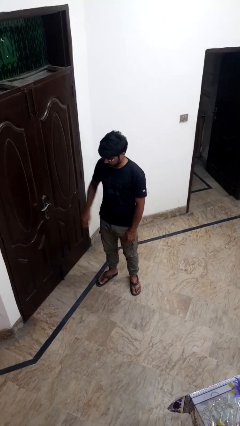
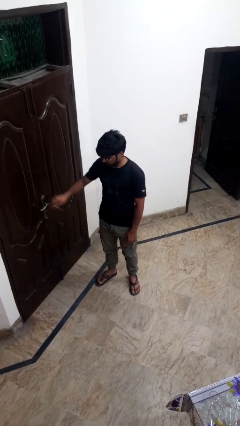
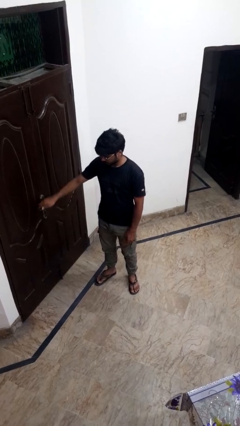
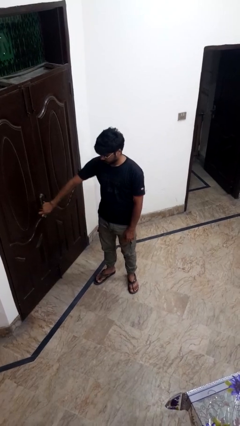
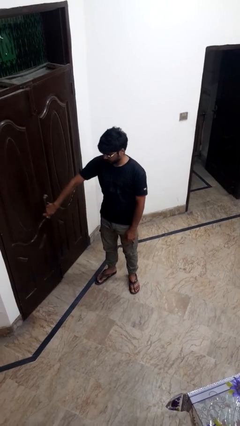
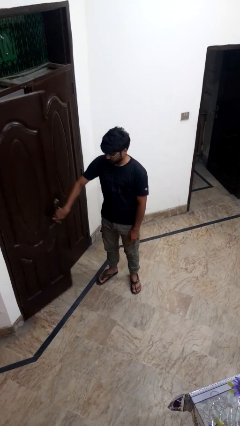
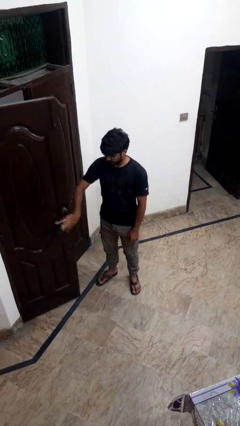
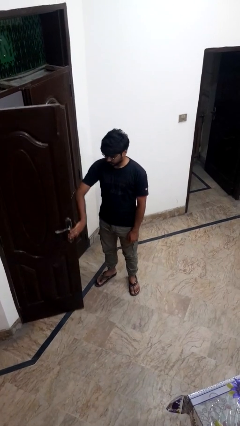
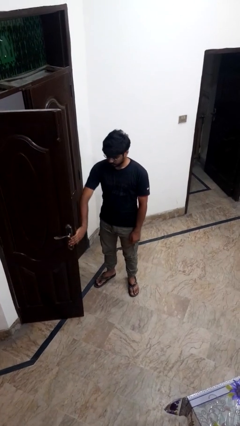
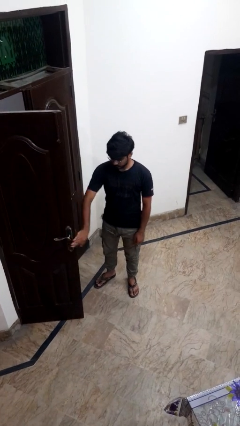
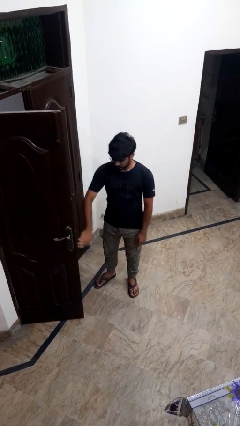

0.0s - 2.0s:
person opens facility door

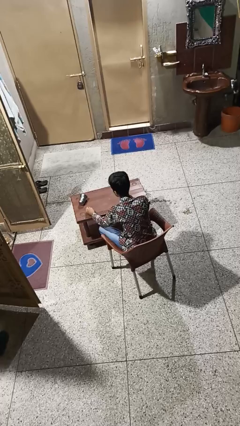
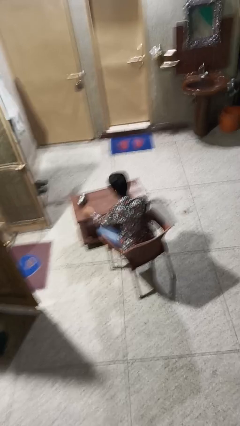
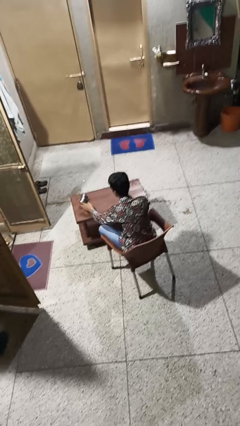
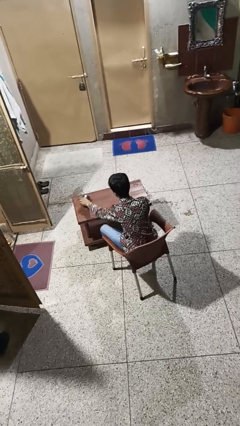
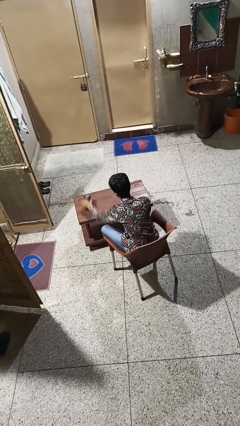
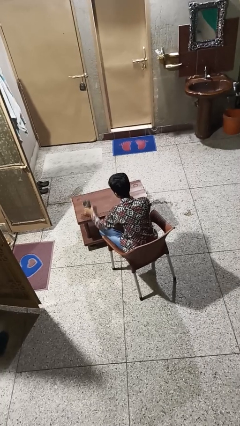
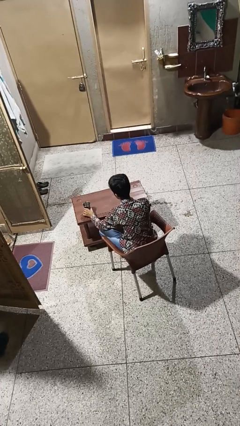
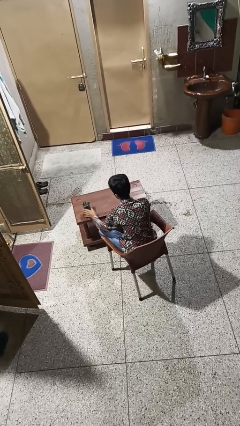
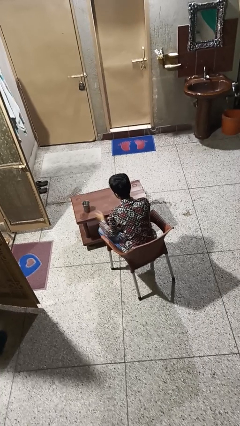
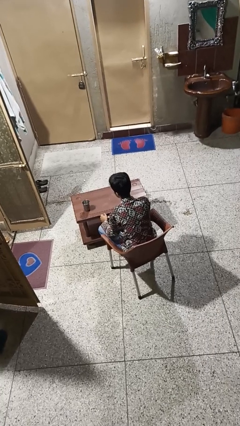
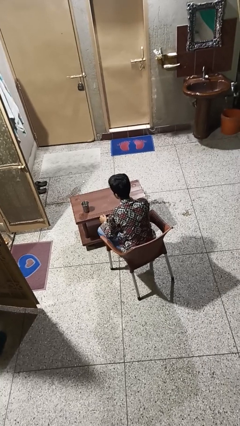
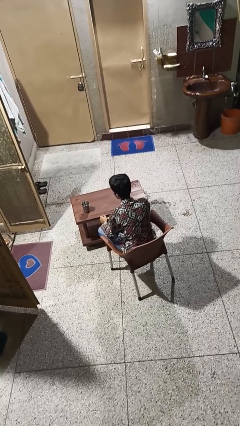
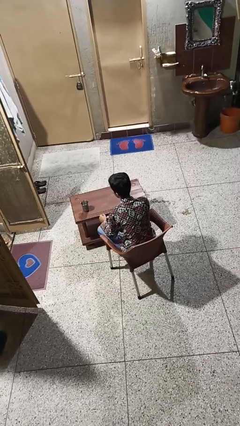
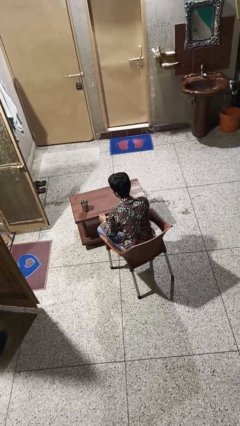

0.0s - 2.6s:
person sets upright glass

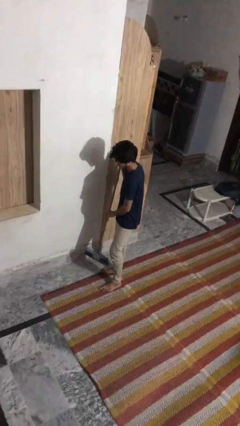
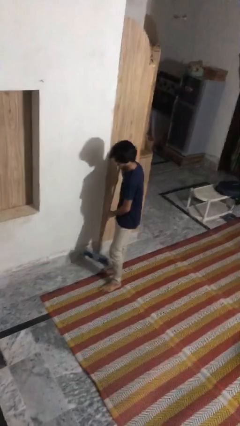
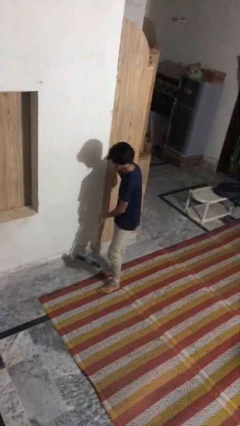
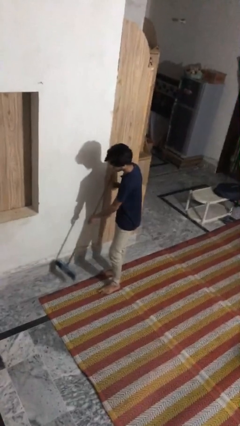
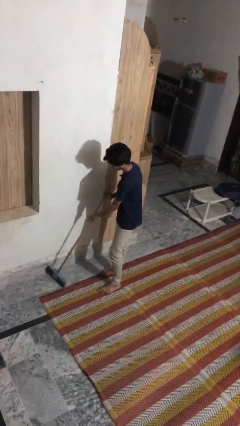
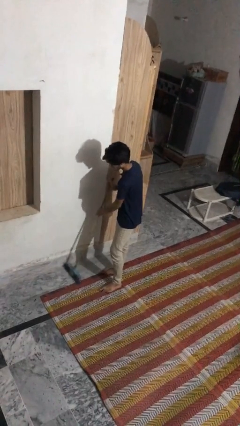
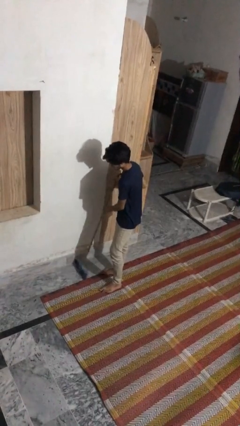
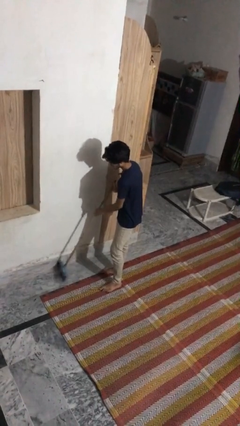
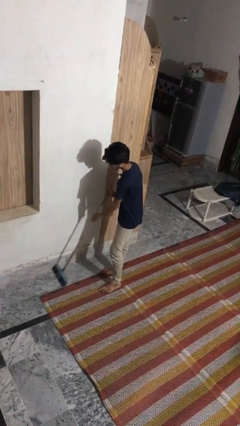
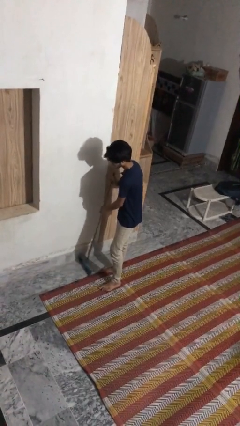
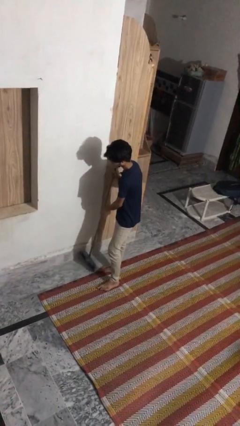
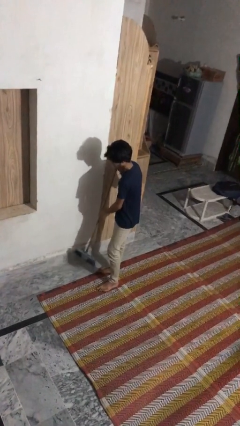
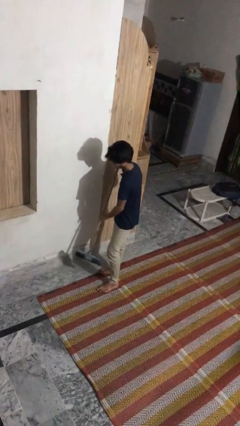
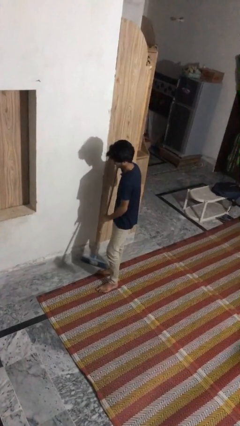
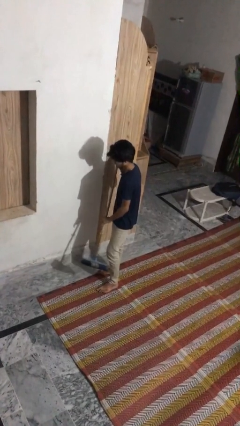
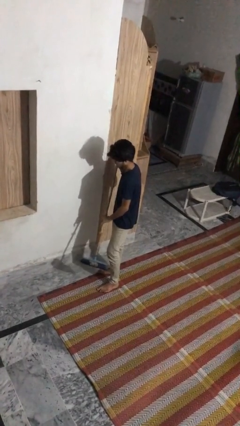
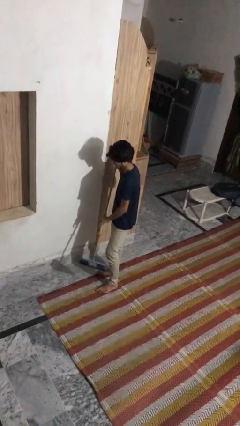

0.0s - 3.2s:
person sweeps floor

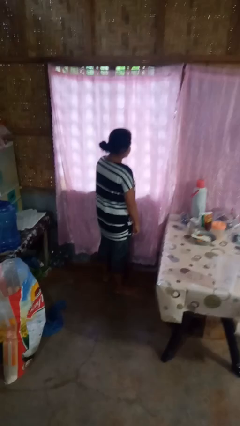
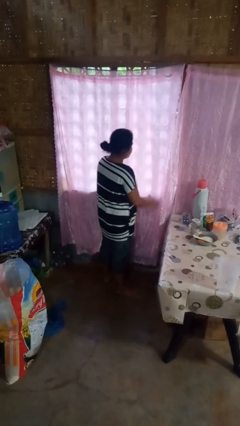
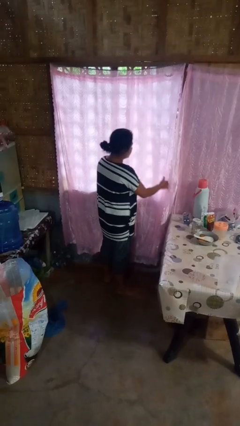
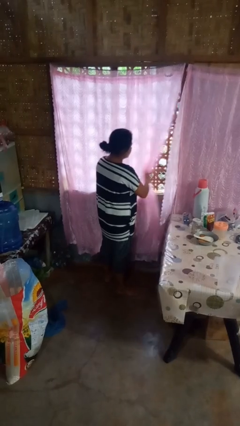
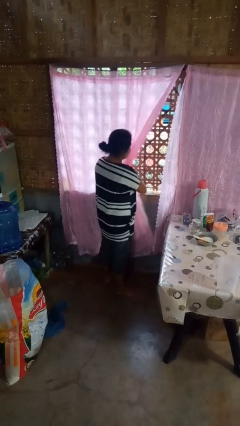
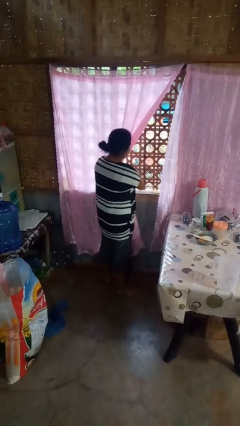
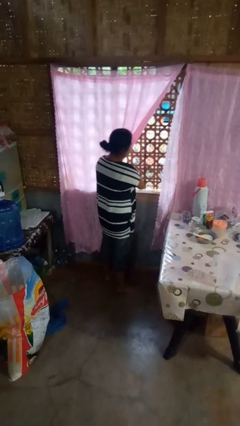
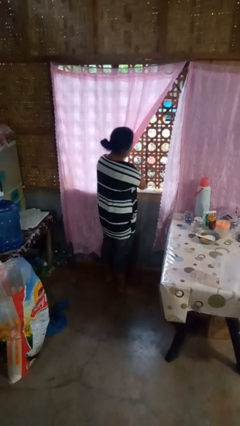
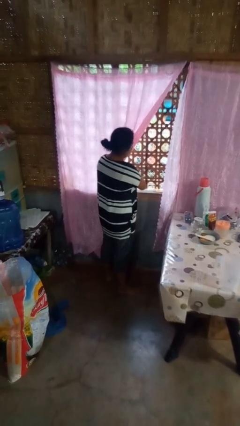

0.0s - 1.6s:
person opens curtains

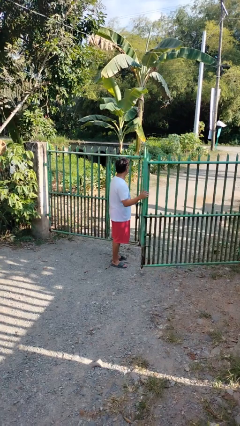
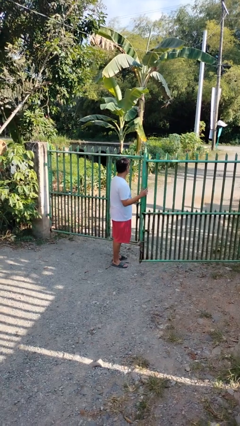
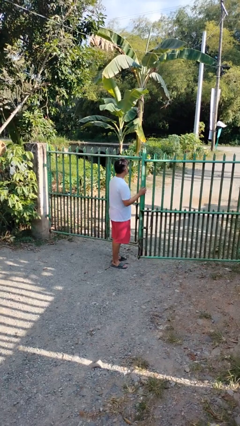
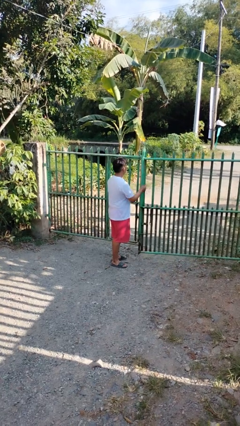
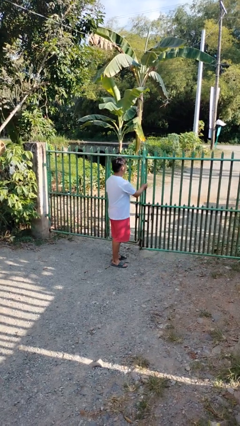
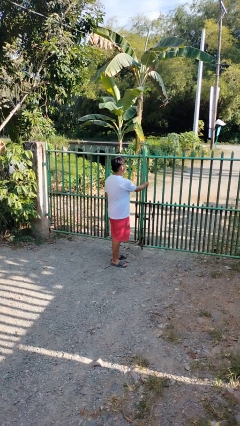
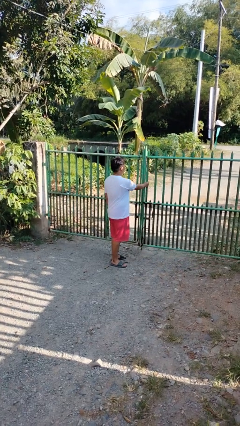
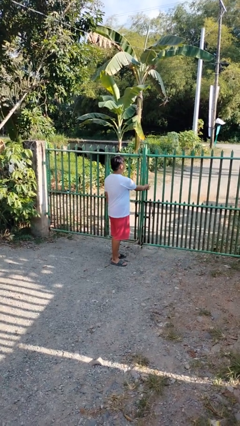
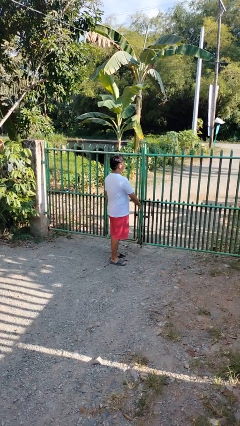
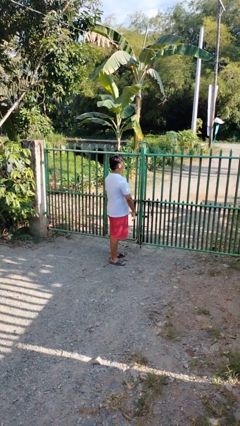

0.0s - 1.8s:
person closes gate

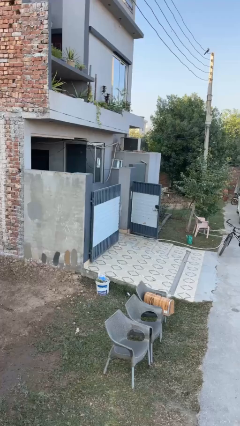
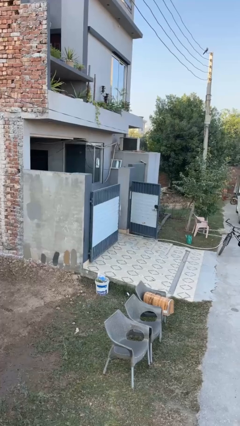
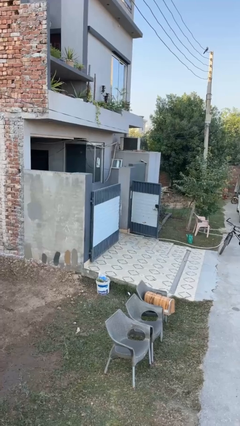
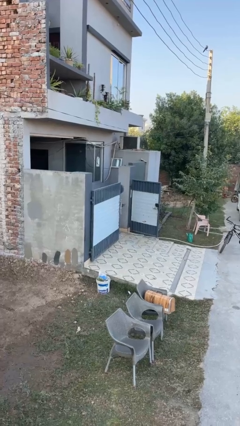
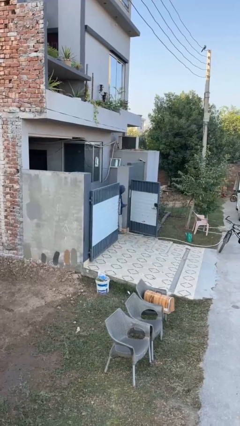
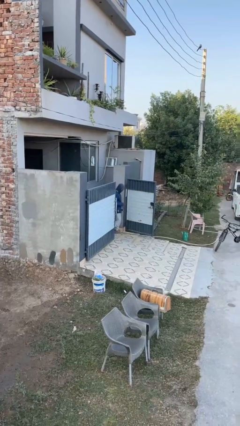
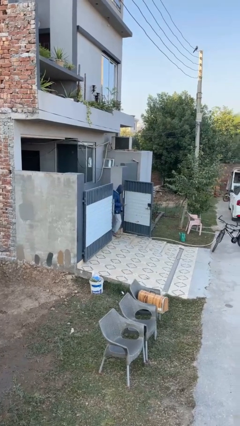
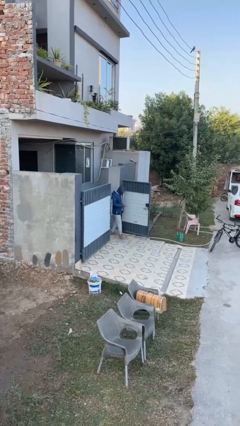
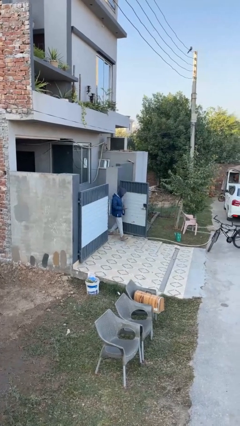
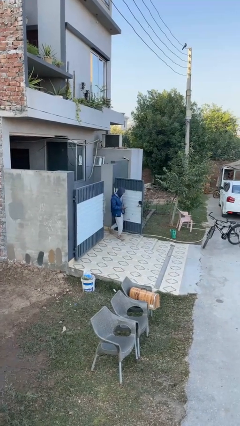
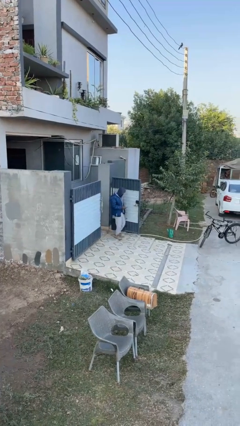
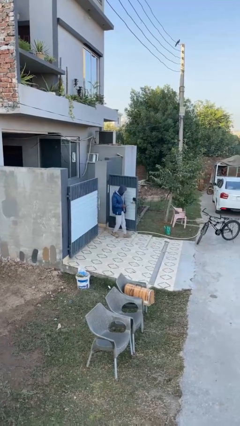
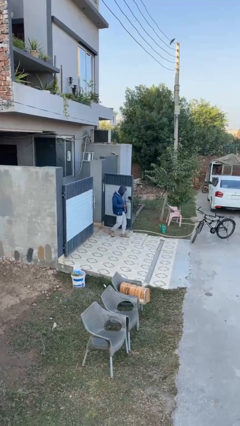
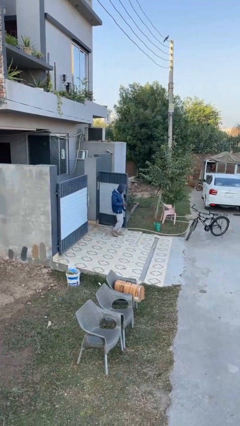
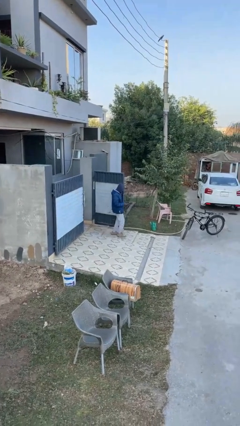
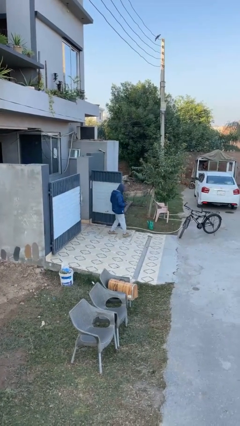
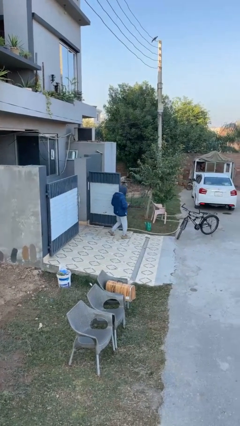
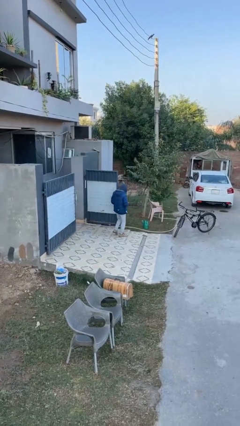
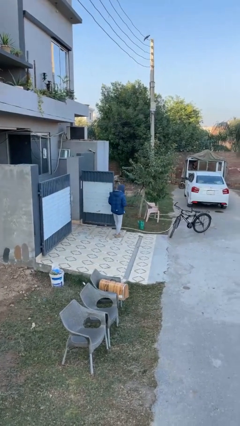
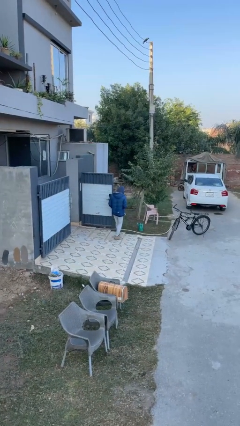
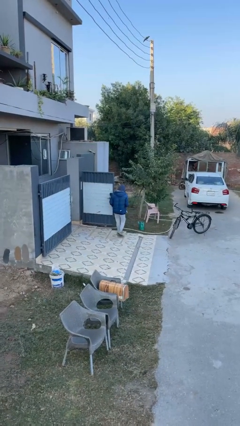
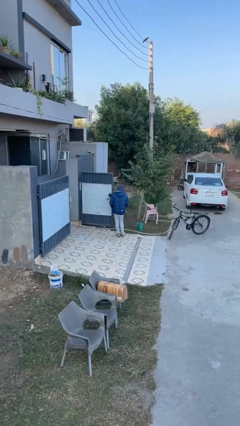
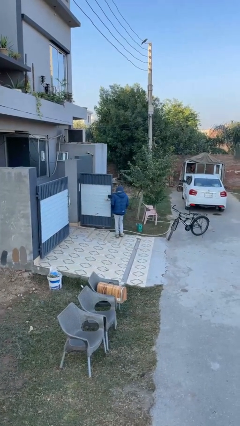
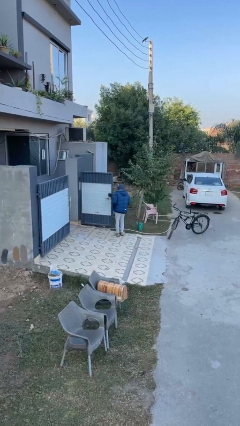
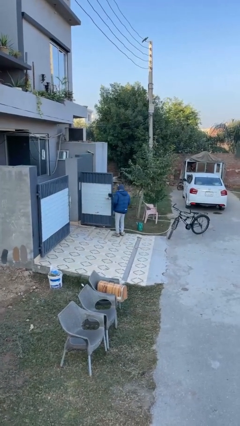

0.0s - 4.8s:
person enters scene through structure

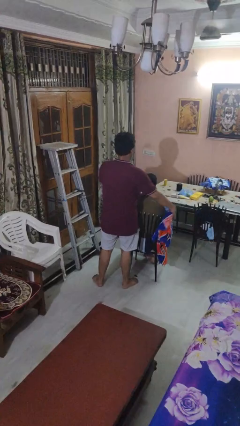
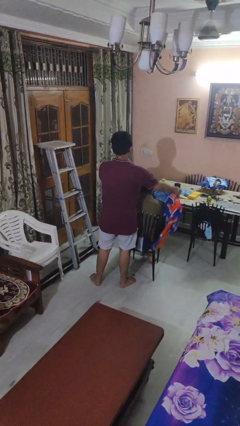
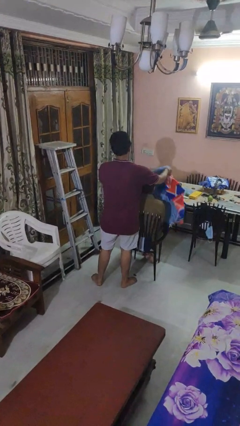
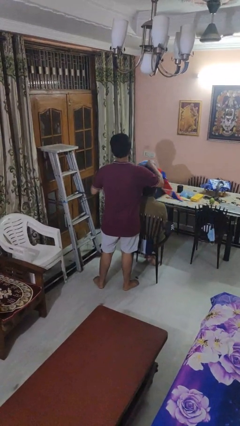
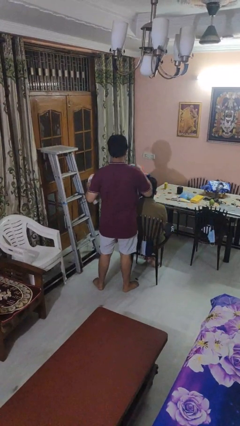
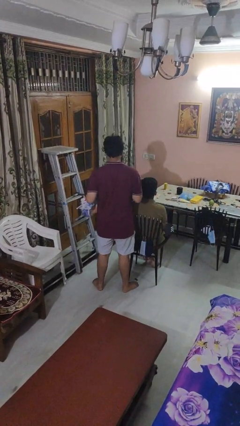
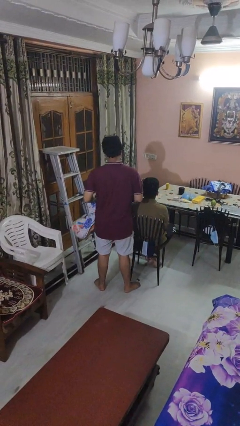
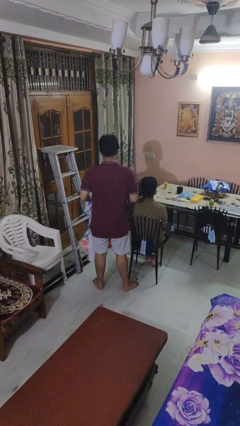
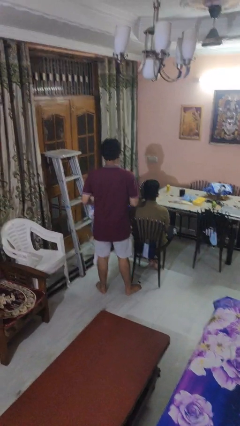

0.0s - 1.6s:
person uncovers friend with blanket
